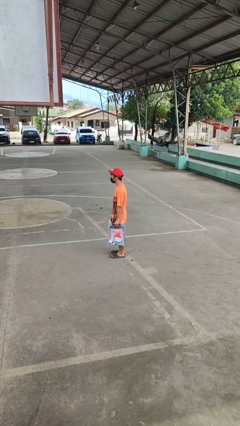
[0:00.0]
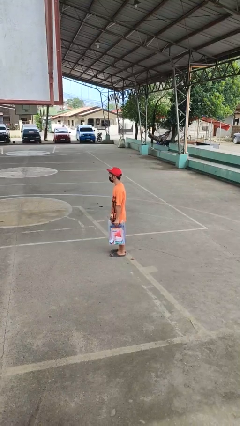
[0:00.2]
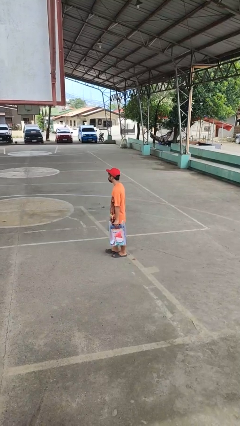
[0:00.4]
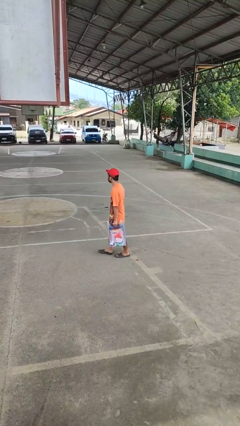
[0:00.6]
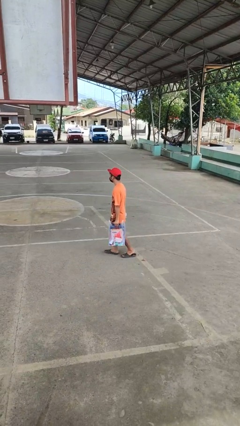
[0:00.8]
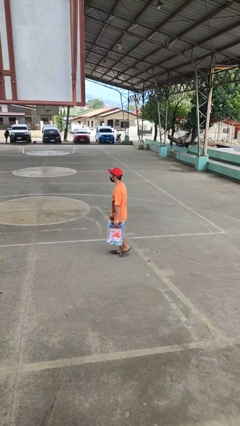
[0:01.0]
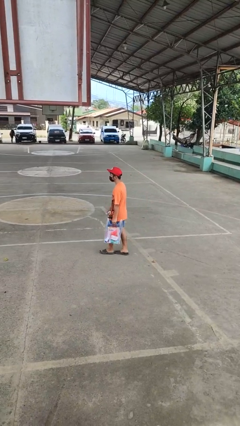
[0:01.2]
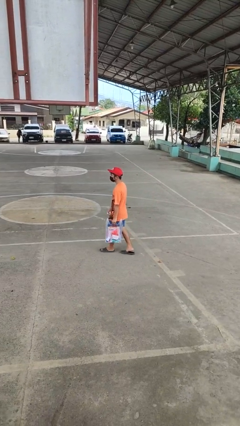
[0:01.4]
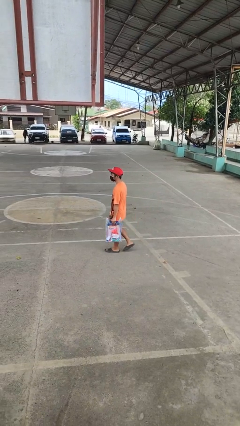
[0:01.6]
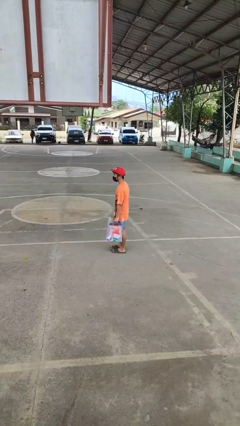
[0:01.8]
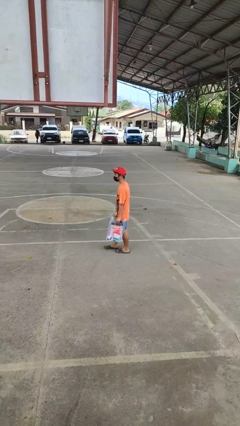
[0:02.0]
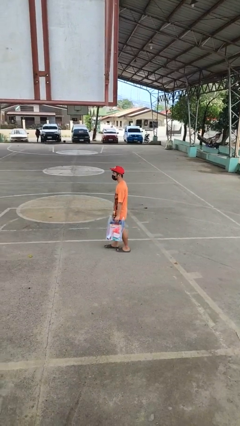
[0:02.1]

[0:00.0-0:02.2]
person carries groceries

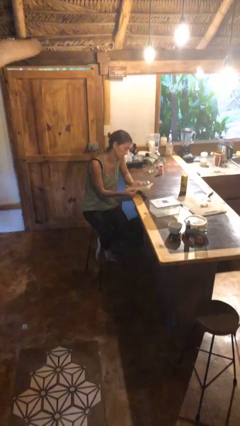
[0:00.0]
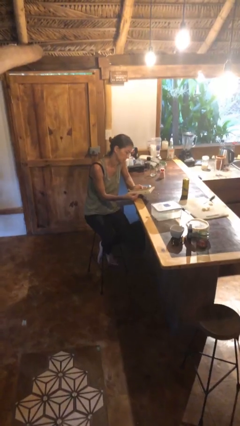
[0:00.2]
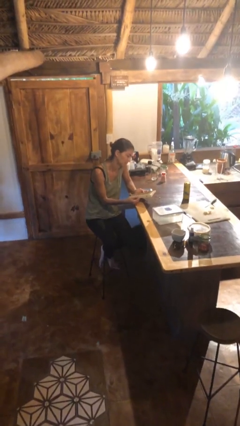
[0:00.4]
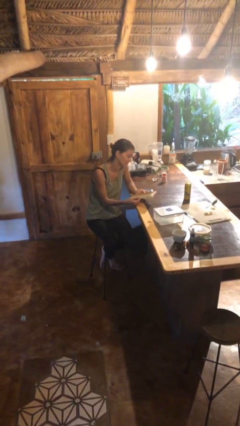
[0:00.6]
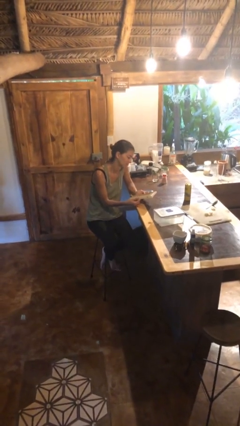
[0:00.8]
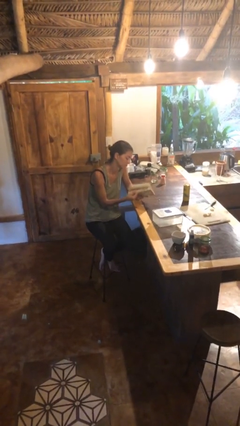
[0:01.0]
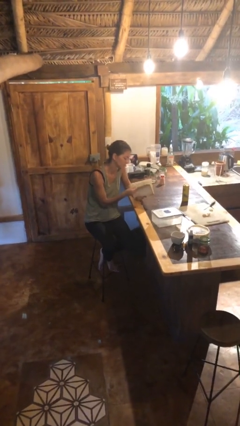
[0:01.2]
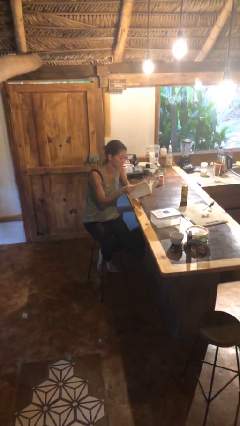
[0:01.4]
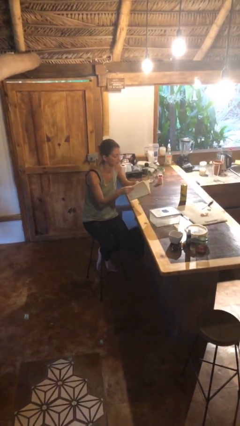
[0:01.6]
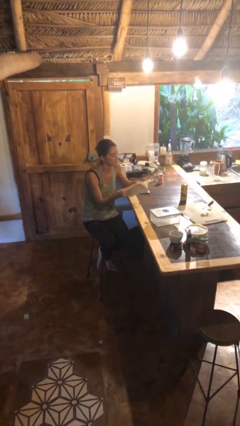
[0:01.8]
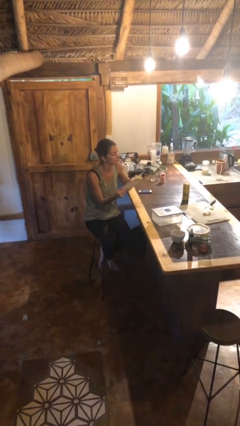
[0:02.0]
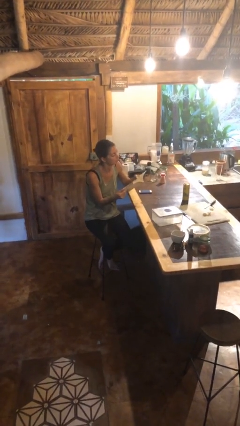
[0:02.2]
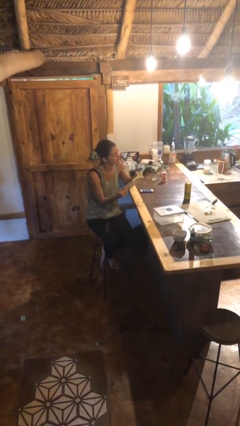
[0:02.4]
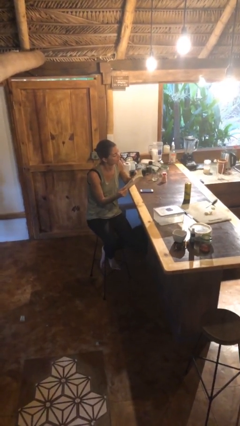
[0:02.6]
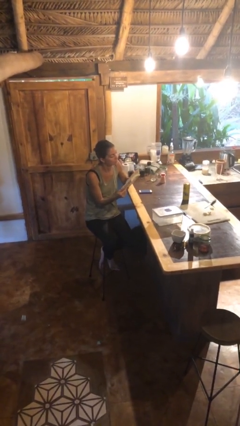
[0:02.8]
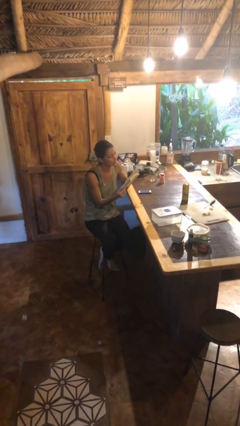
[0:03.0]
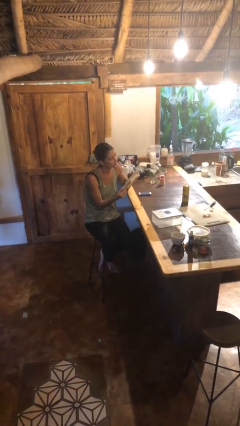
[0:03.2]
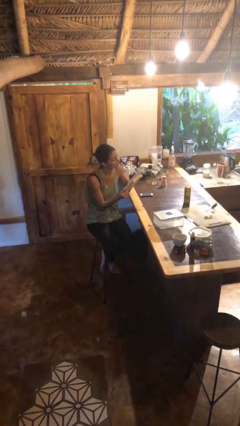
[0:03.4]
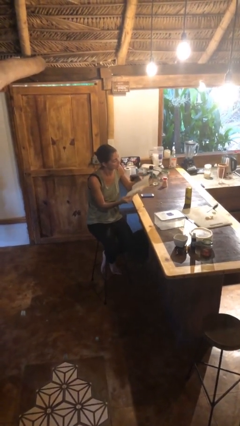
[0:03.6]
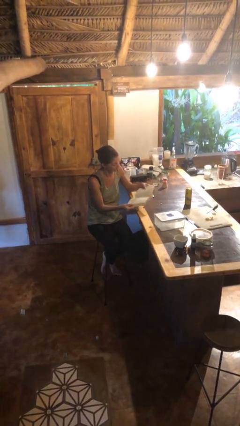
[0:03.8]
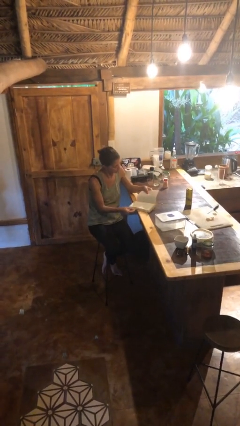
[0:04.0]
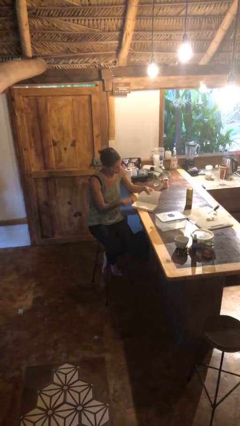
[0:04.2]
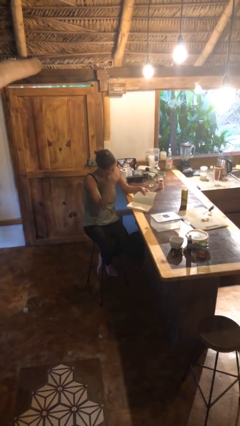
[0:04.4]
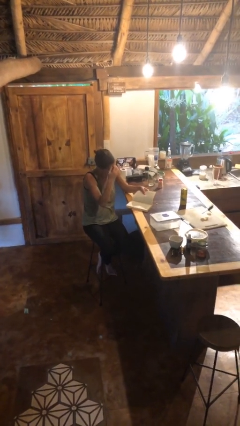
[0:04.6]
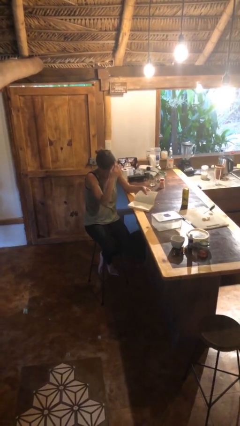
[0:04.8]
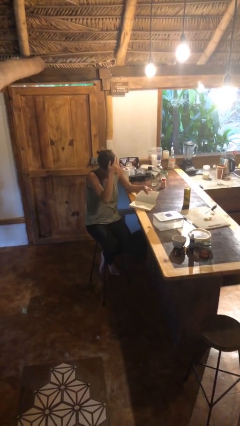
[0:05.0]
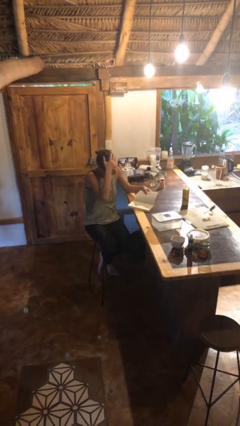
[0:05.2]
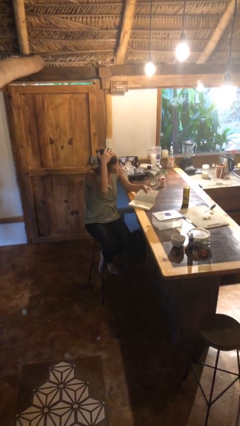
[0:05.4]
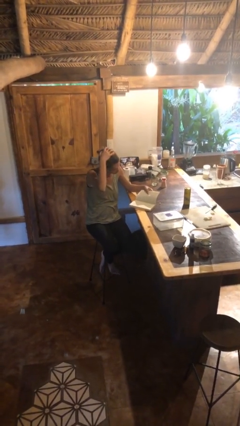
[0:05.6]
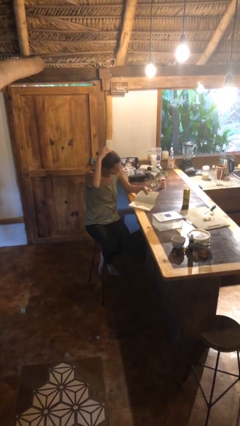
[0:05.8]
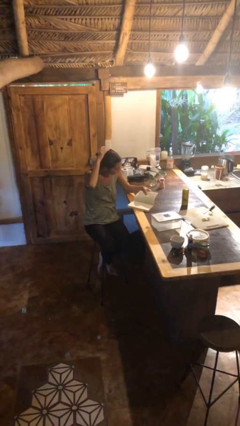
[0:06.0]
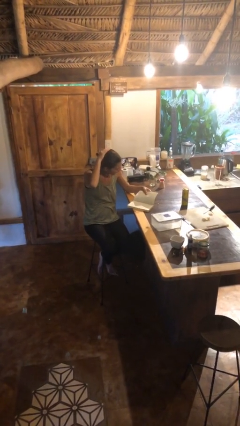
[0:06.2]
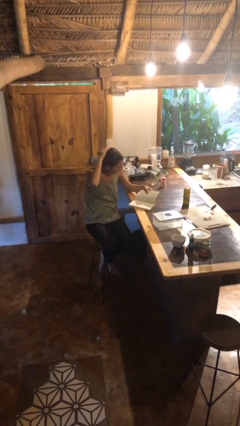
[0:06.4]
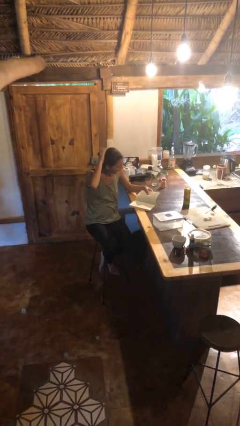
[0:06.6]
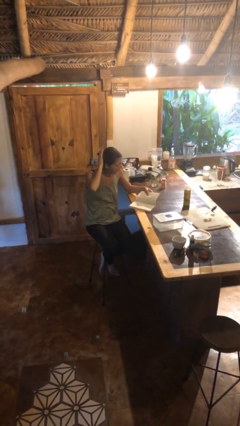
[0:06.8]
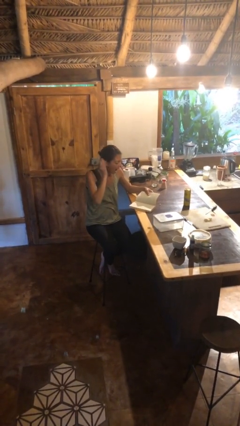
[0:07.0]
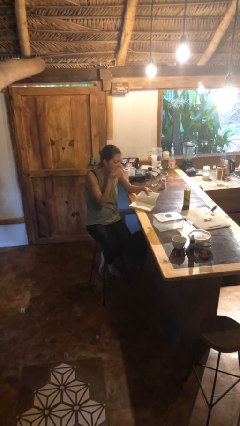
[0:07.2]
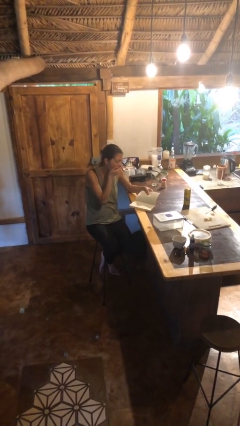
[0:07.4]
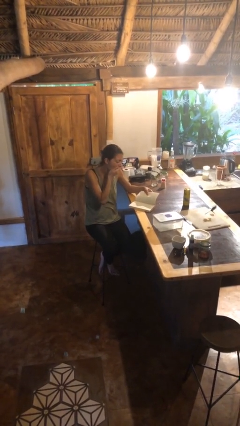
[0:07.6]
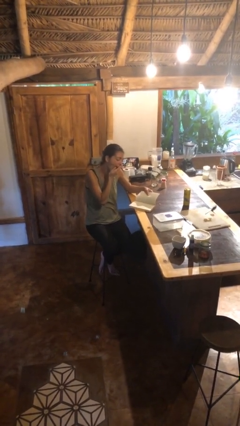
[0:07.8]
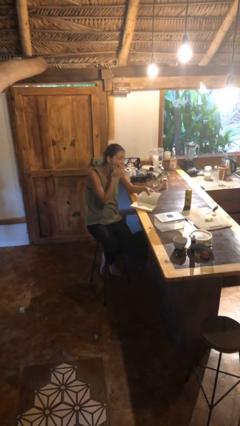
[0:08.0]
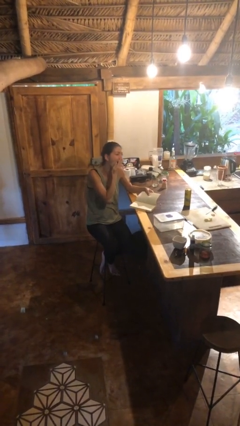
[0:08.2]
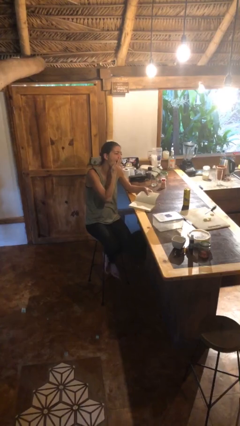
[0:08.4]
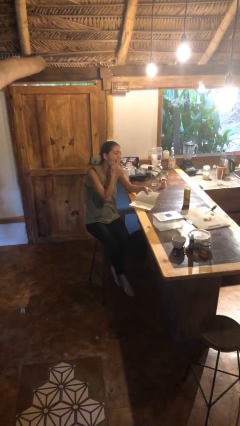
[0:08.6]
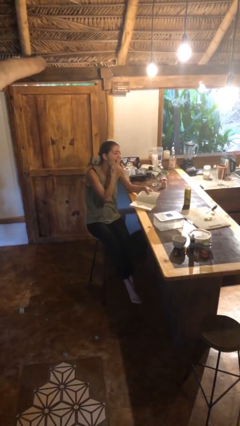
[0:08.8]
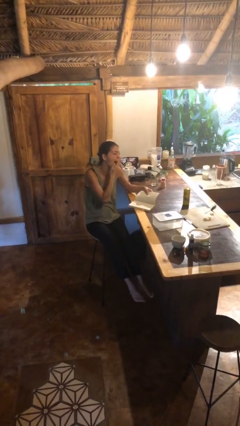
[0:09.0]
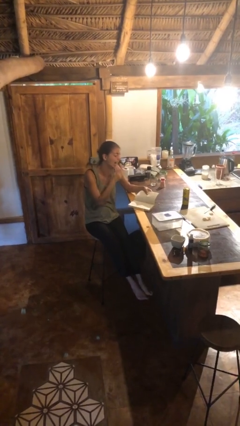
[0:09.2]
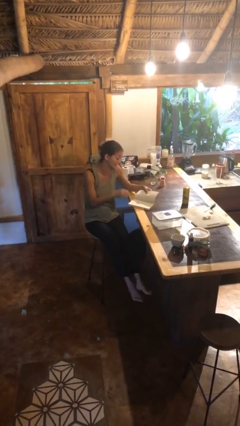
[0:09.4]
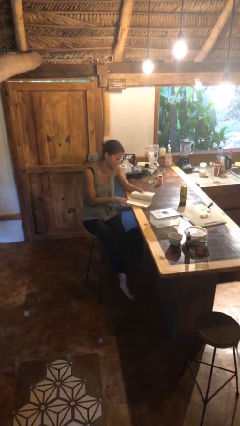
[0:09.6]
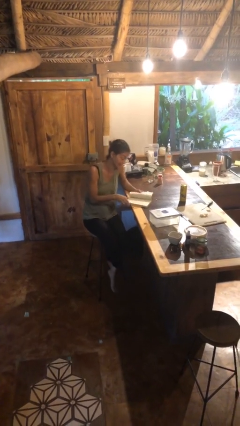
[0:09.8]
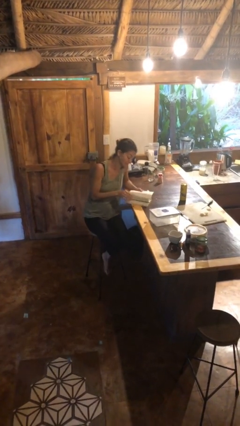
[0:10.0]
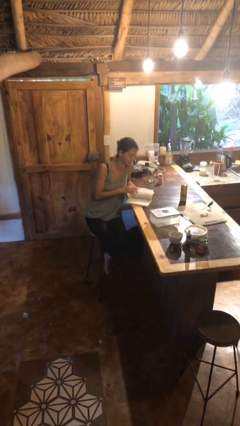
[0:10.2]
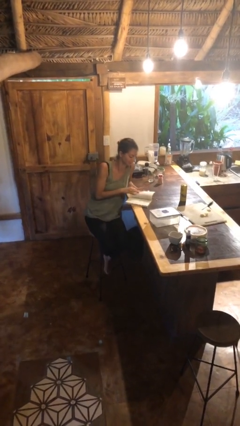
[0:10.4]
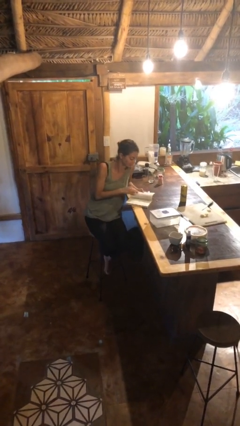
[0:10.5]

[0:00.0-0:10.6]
person reads document

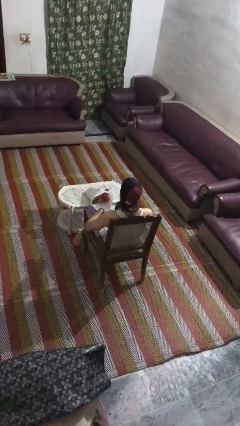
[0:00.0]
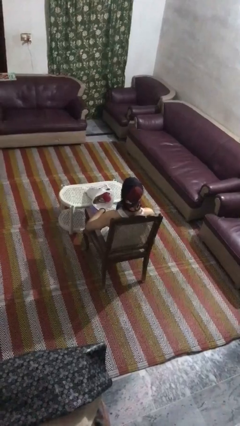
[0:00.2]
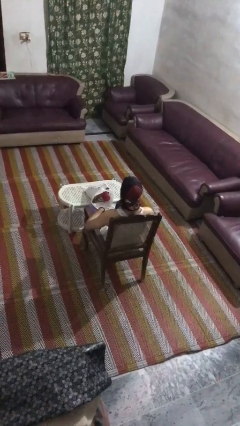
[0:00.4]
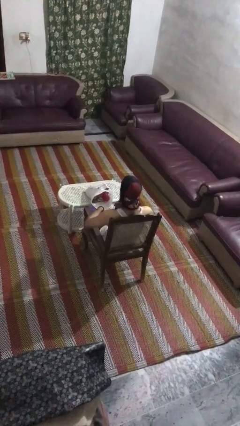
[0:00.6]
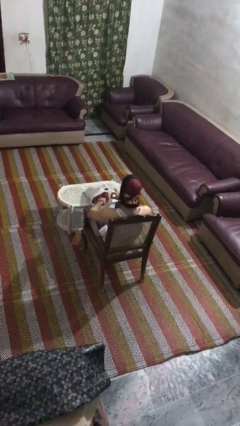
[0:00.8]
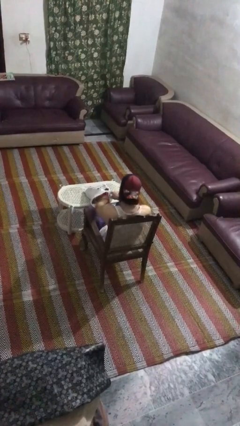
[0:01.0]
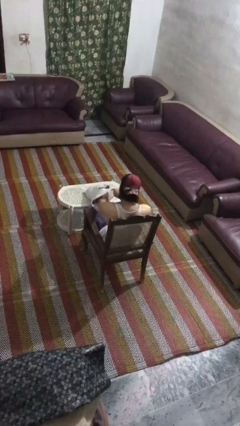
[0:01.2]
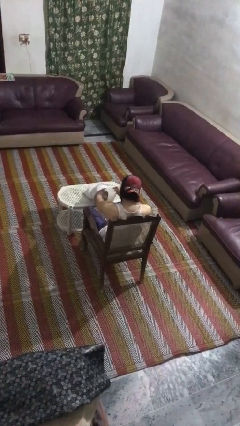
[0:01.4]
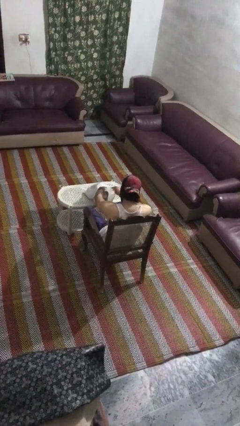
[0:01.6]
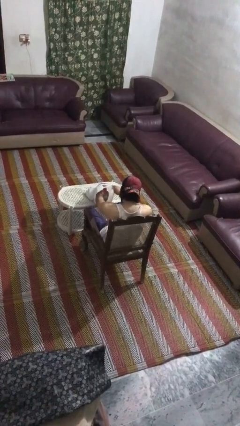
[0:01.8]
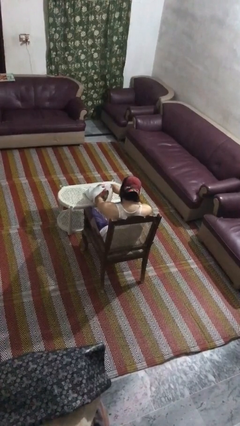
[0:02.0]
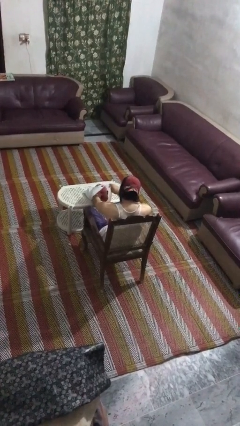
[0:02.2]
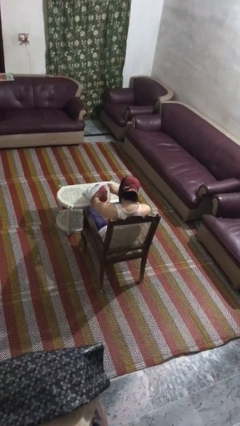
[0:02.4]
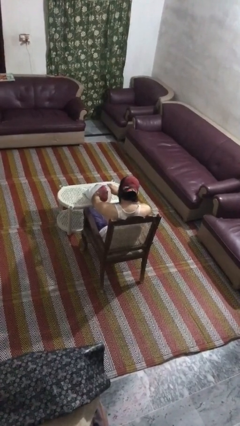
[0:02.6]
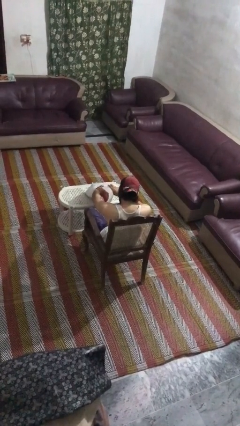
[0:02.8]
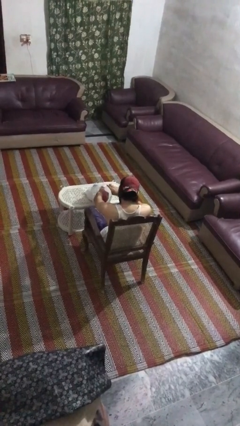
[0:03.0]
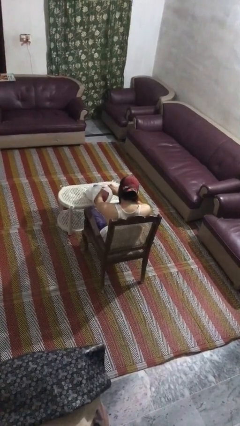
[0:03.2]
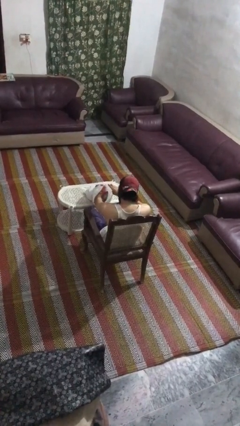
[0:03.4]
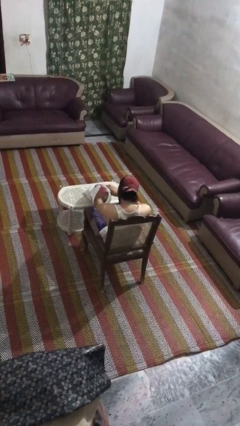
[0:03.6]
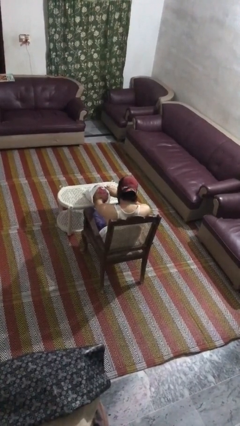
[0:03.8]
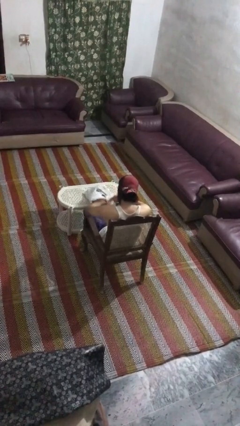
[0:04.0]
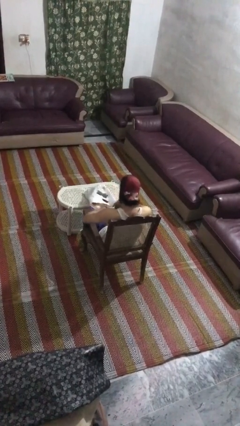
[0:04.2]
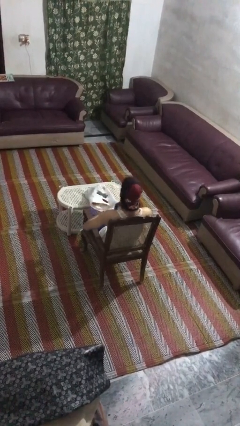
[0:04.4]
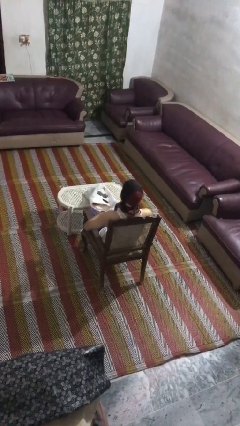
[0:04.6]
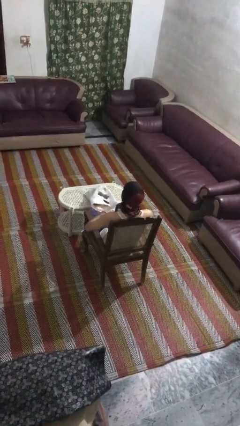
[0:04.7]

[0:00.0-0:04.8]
person searches in bag

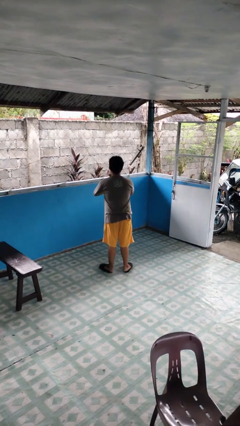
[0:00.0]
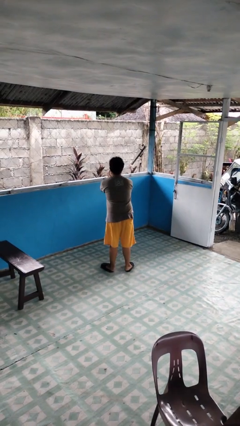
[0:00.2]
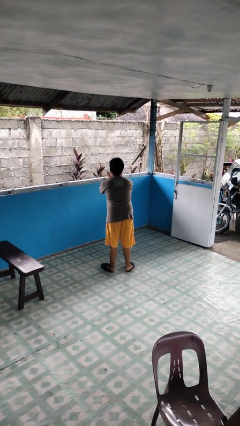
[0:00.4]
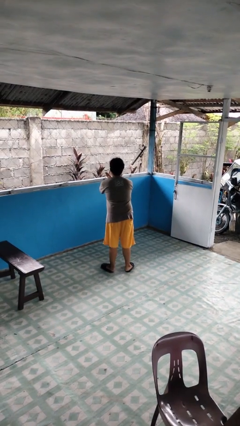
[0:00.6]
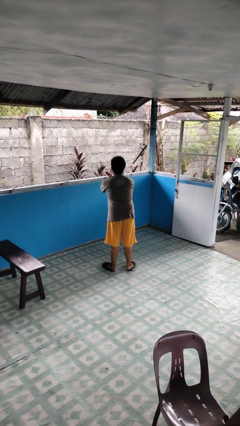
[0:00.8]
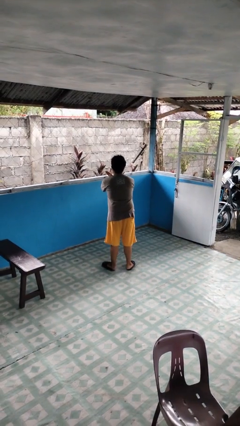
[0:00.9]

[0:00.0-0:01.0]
person gestures arms x
